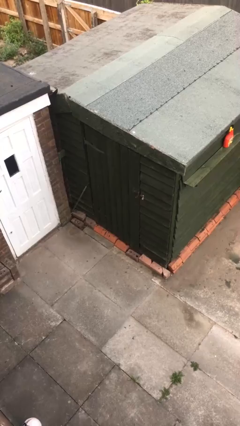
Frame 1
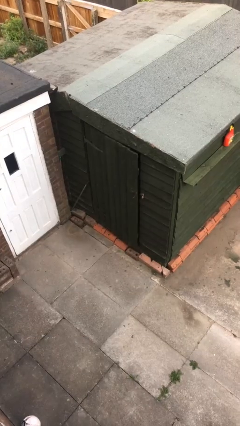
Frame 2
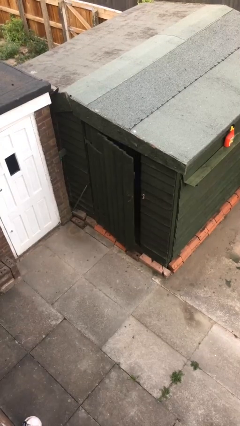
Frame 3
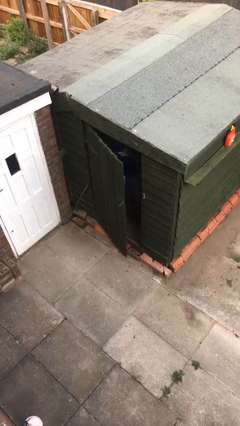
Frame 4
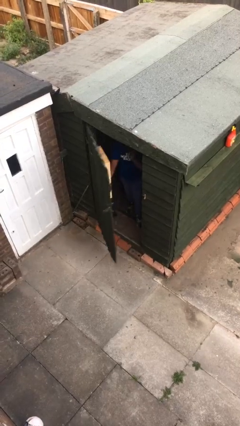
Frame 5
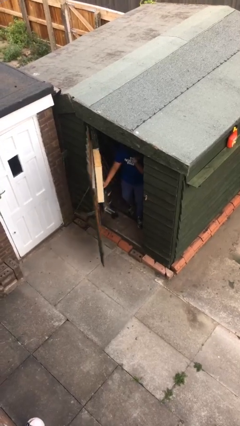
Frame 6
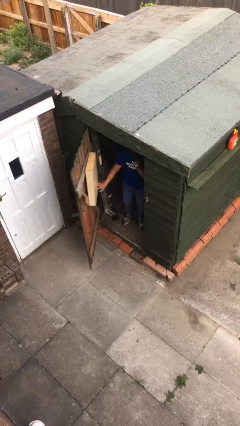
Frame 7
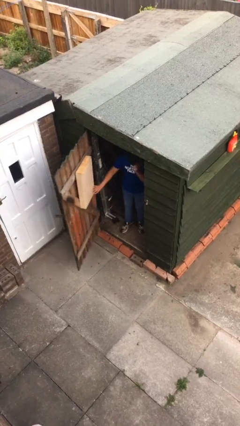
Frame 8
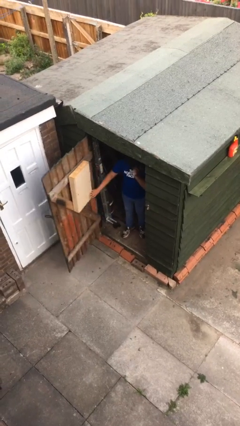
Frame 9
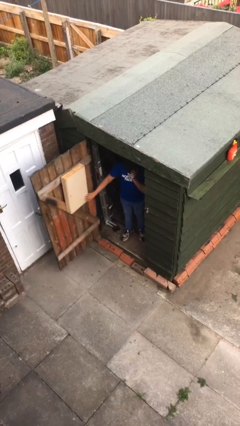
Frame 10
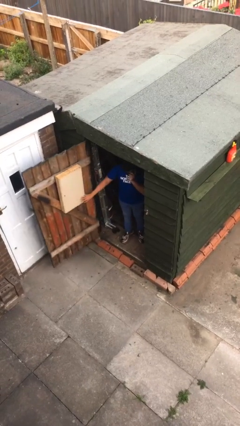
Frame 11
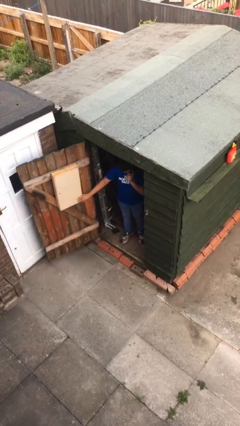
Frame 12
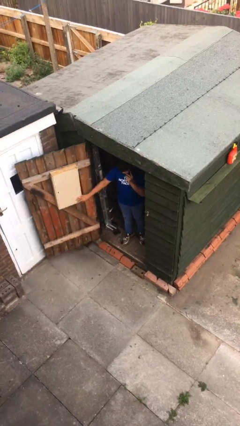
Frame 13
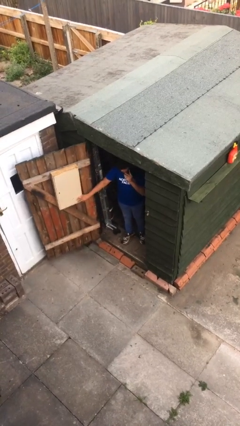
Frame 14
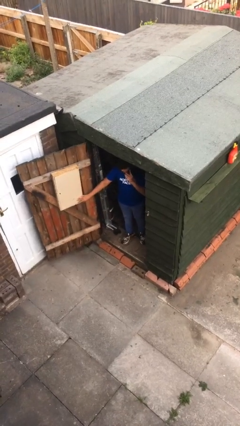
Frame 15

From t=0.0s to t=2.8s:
person opens facility door

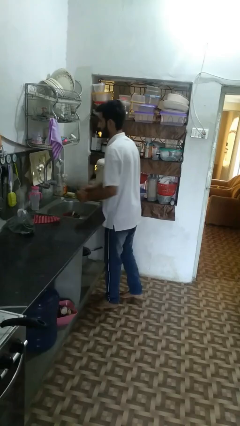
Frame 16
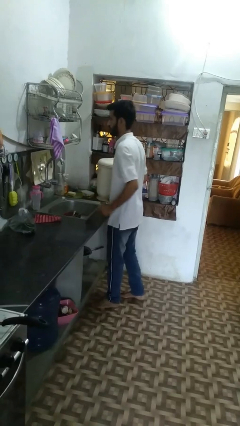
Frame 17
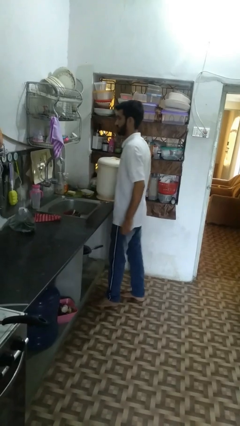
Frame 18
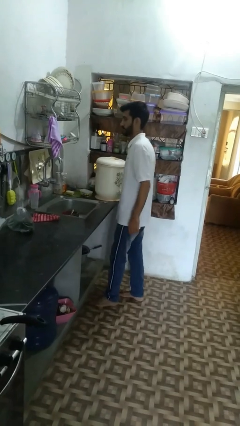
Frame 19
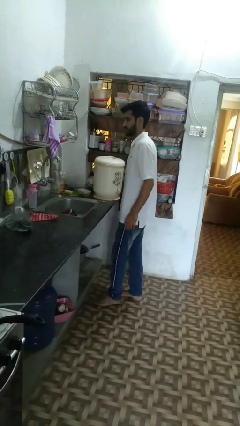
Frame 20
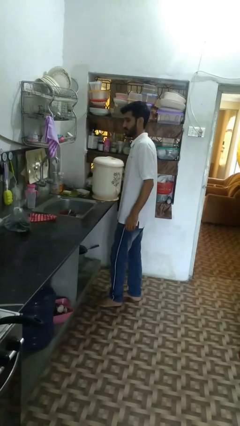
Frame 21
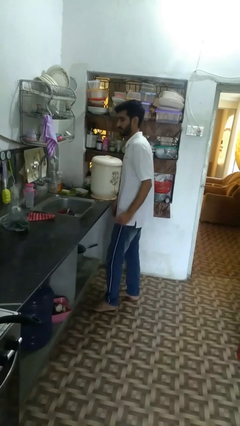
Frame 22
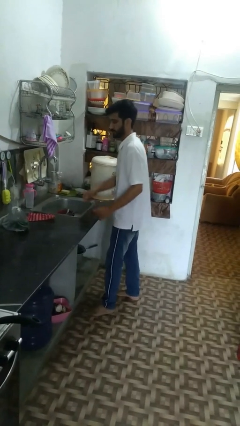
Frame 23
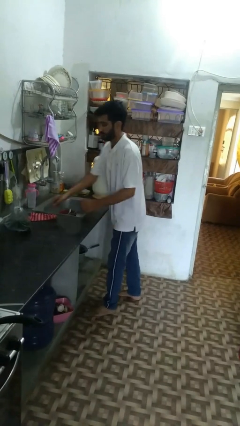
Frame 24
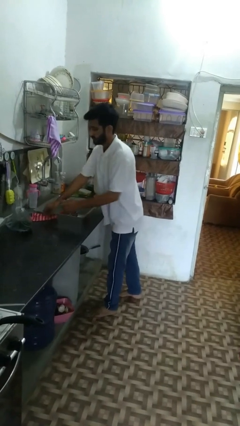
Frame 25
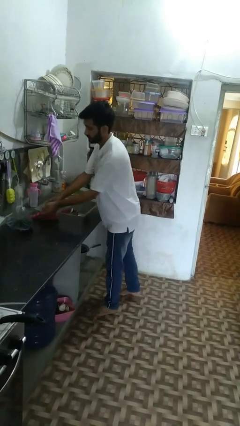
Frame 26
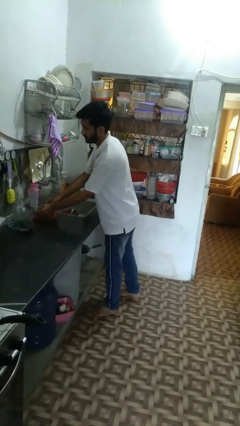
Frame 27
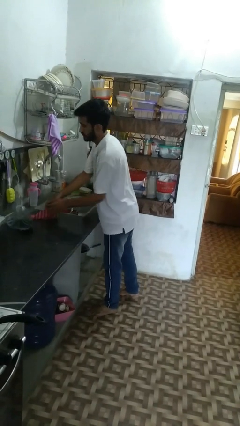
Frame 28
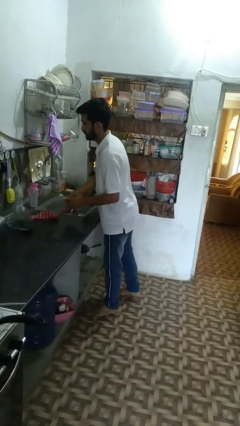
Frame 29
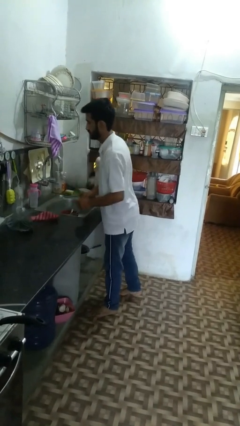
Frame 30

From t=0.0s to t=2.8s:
person dries hands with towel

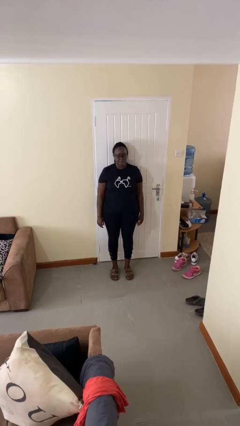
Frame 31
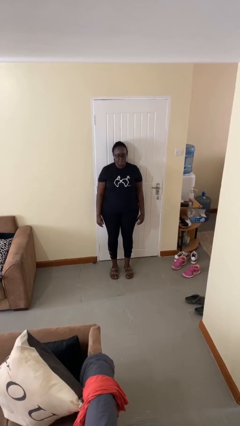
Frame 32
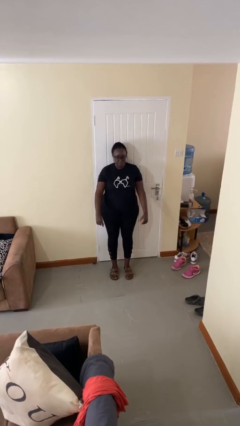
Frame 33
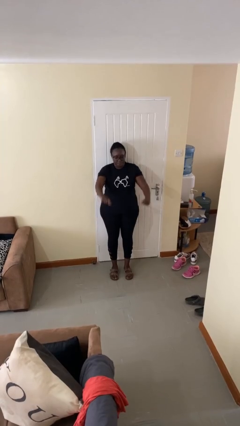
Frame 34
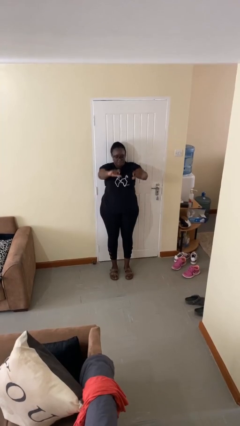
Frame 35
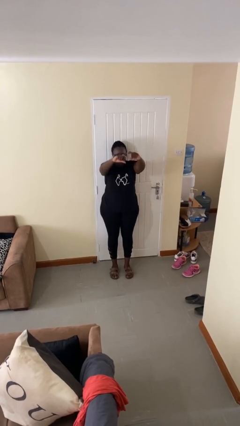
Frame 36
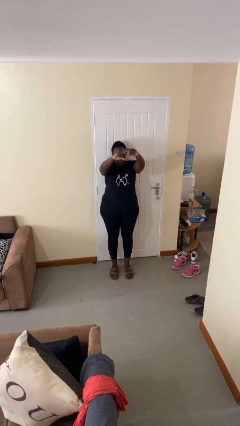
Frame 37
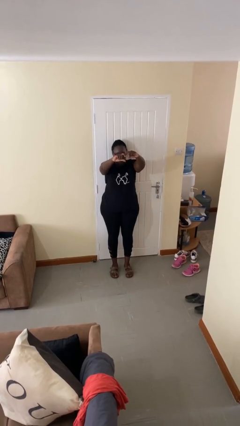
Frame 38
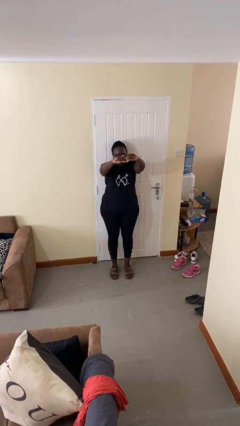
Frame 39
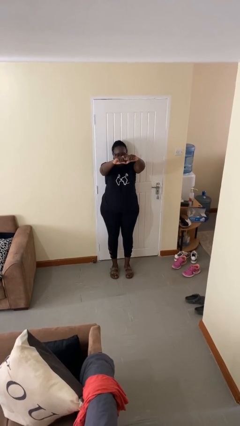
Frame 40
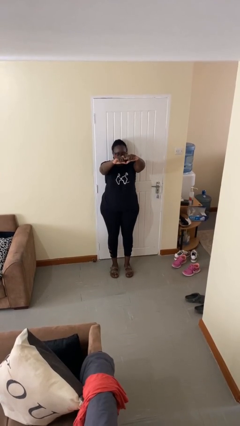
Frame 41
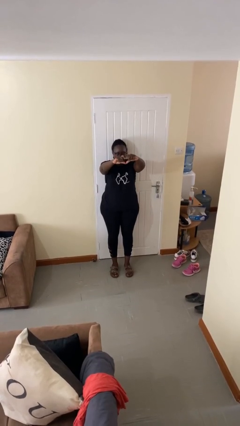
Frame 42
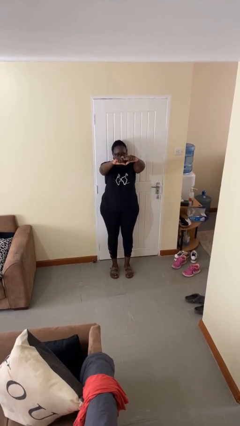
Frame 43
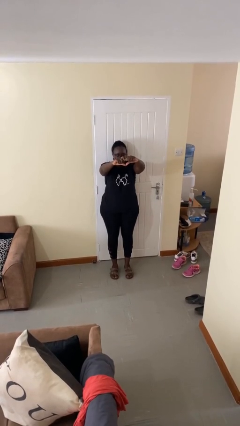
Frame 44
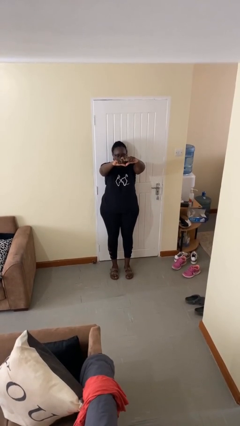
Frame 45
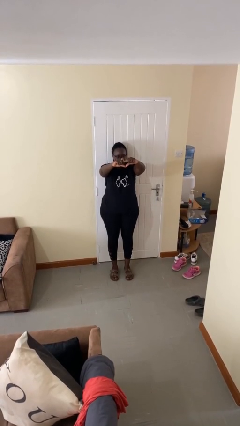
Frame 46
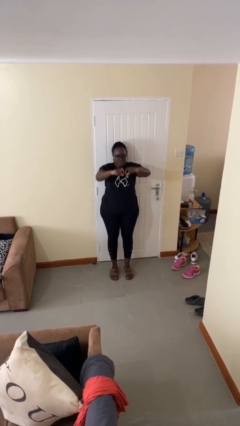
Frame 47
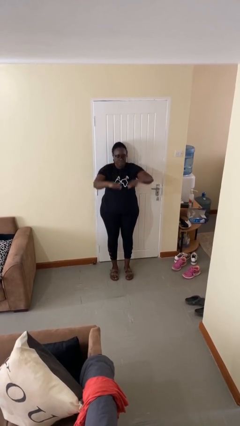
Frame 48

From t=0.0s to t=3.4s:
person gestures heart

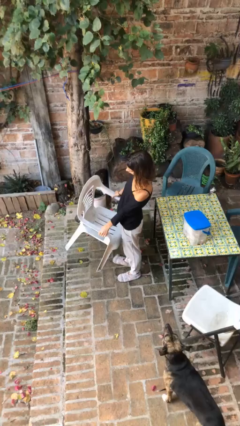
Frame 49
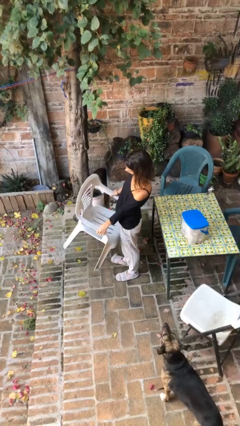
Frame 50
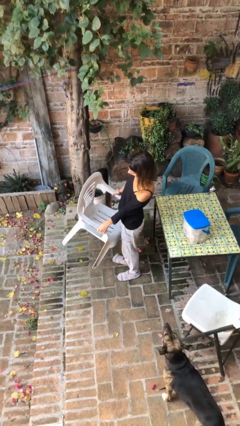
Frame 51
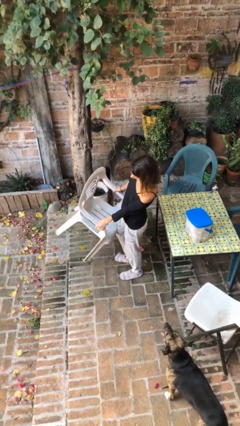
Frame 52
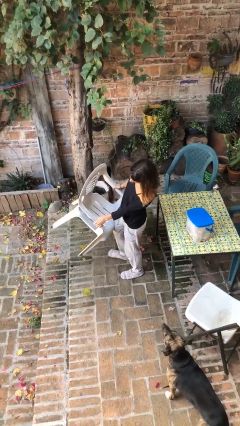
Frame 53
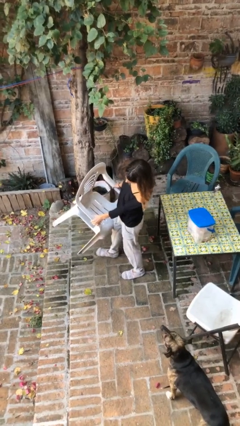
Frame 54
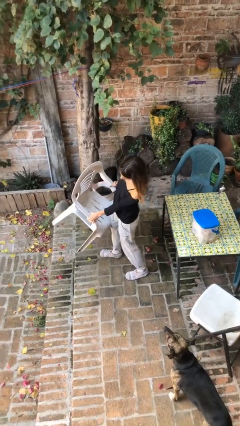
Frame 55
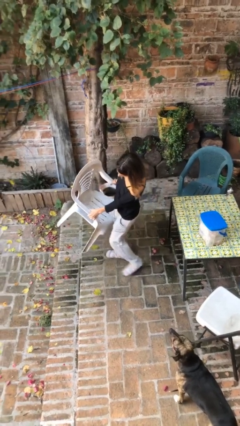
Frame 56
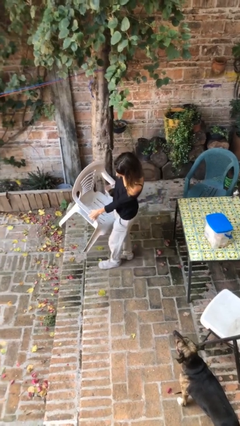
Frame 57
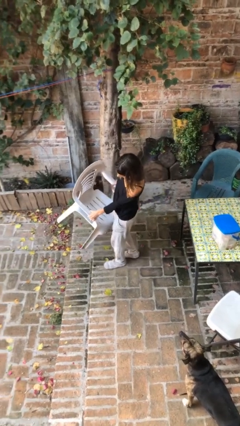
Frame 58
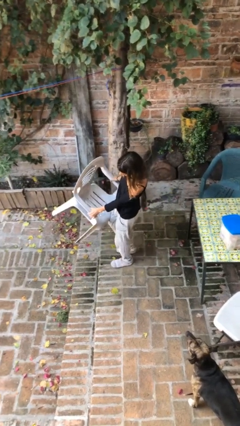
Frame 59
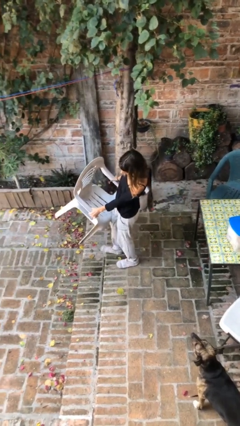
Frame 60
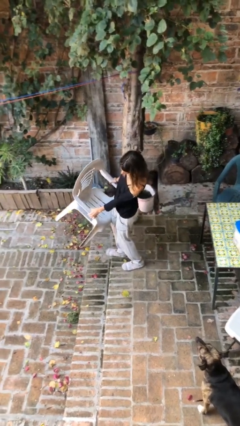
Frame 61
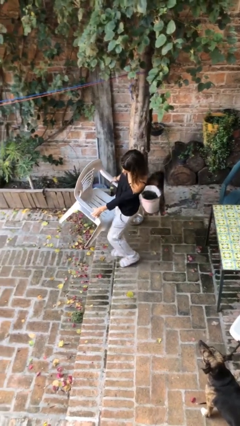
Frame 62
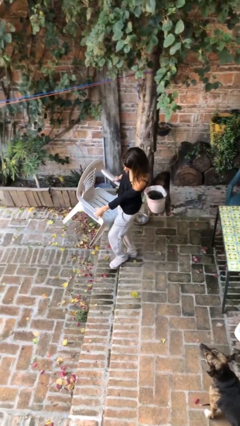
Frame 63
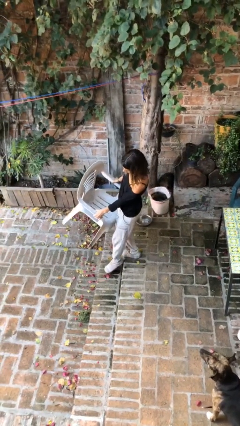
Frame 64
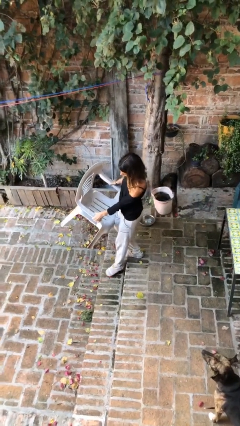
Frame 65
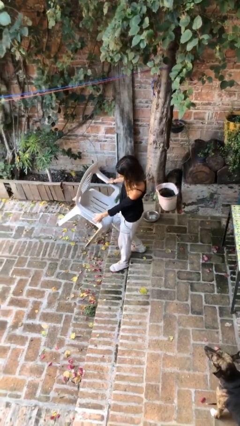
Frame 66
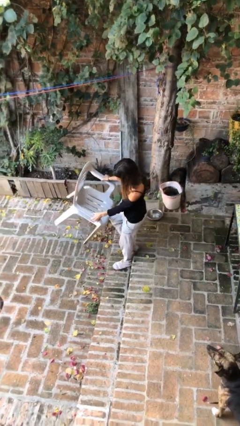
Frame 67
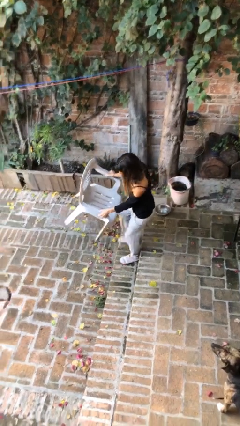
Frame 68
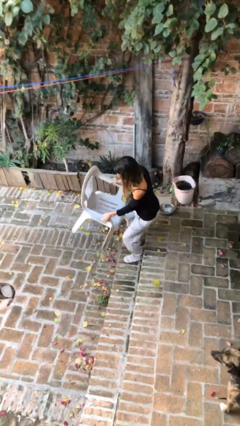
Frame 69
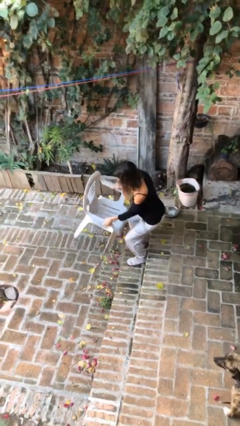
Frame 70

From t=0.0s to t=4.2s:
person carries heavy object

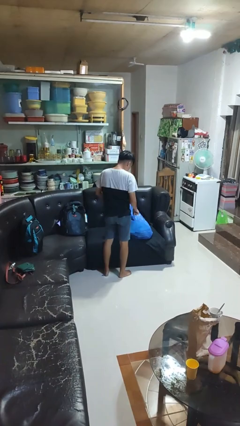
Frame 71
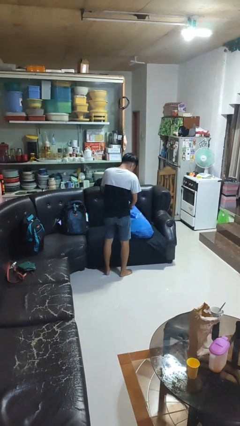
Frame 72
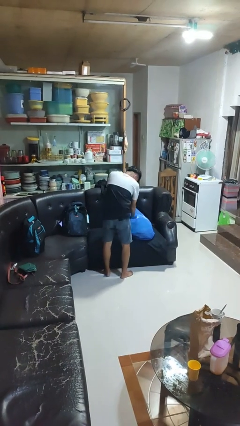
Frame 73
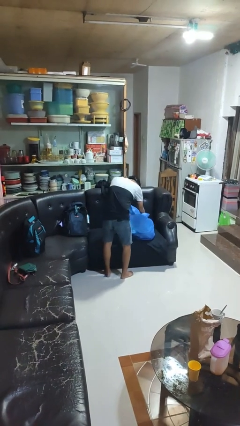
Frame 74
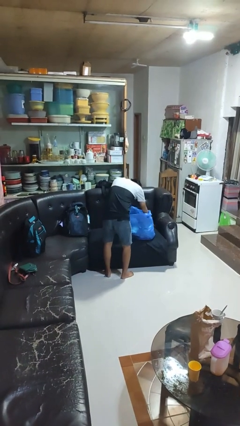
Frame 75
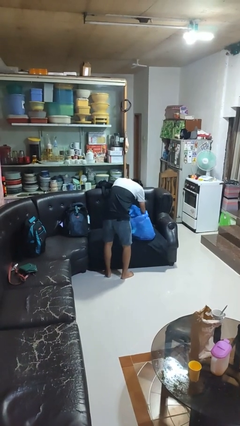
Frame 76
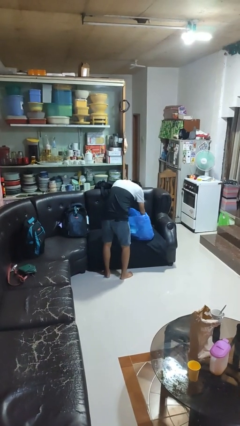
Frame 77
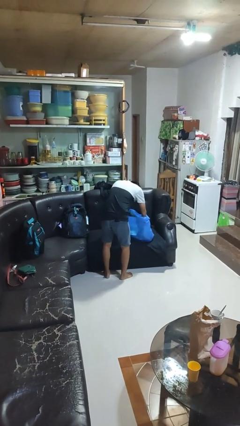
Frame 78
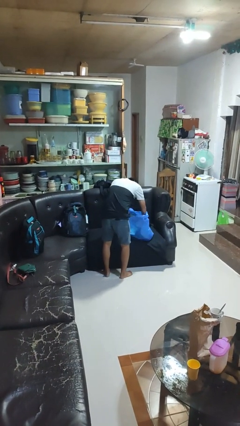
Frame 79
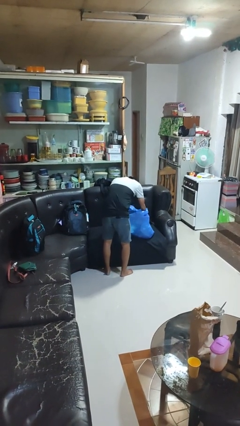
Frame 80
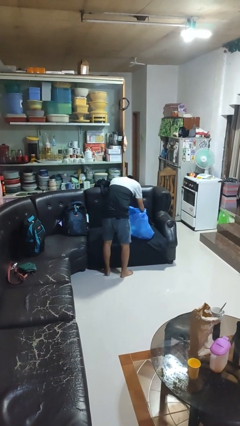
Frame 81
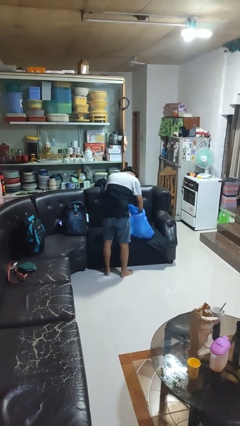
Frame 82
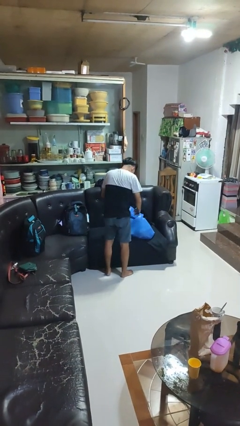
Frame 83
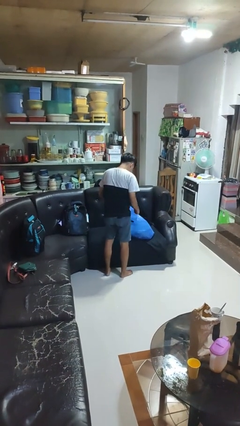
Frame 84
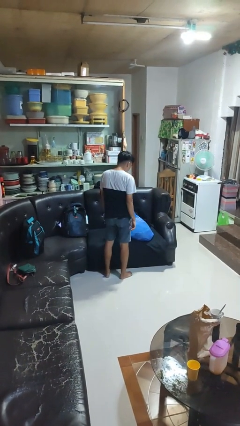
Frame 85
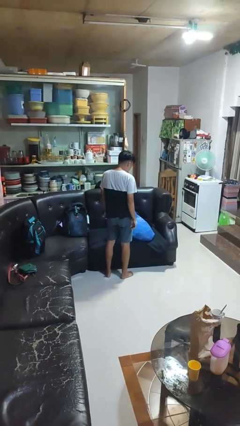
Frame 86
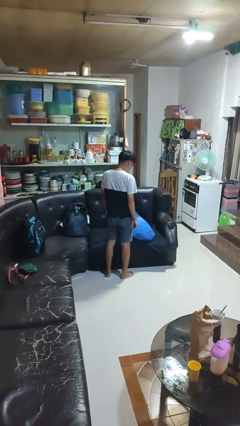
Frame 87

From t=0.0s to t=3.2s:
person searches in bag

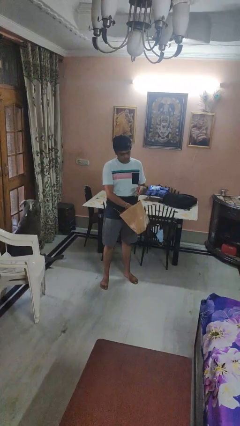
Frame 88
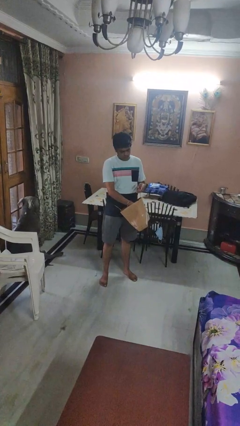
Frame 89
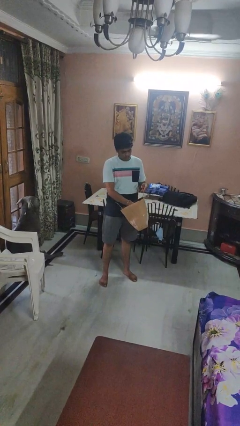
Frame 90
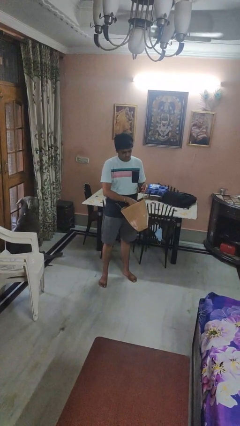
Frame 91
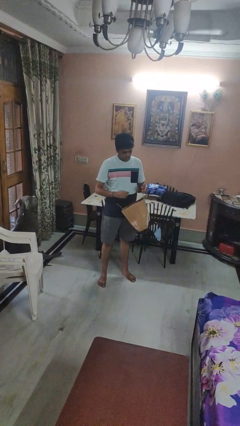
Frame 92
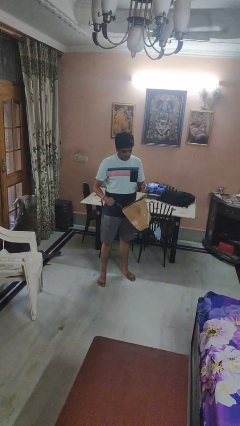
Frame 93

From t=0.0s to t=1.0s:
person puts object into bag
